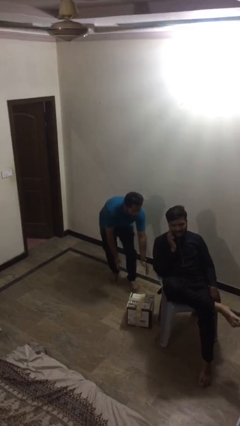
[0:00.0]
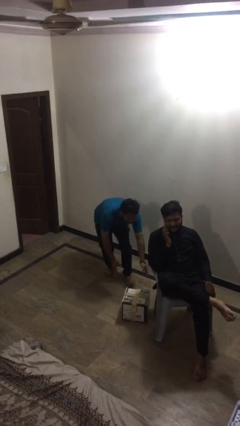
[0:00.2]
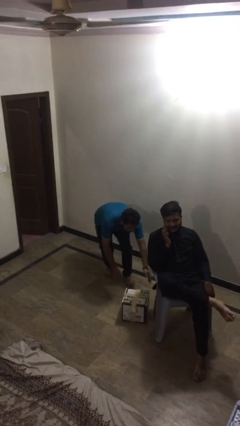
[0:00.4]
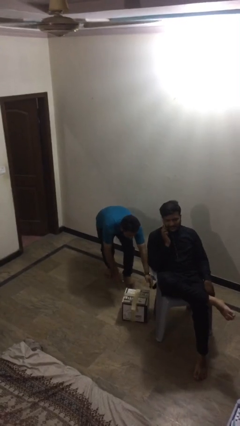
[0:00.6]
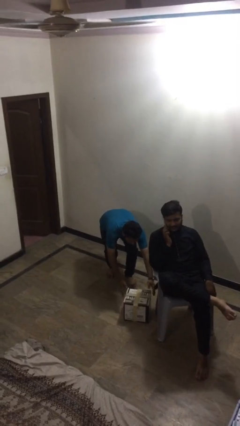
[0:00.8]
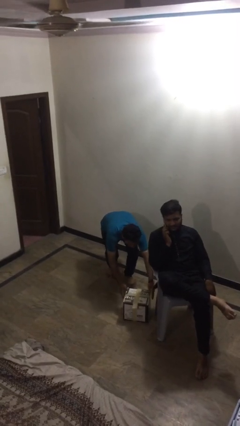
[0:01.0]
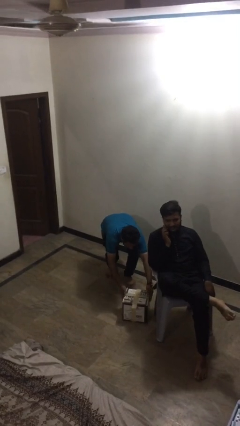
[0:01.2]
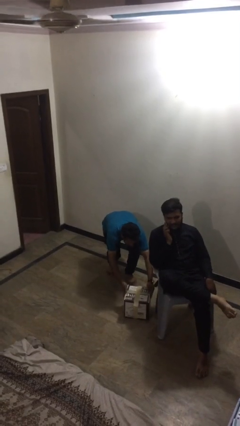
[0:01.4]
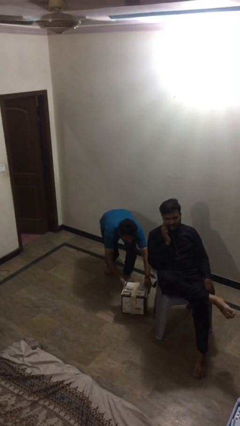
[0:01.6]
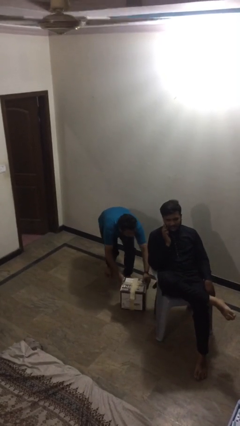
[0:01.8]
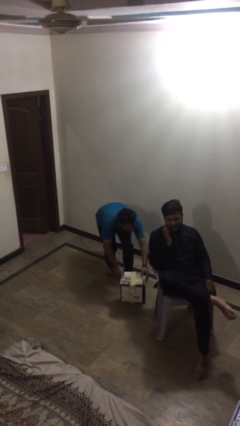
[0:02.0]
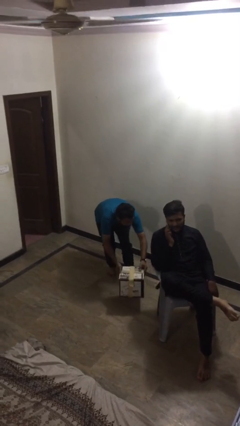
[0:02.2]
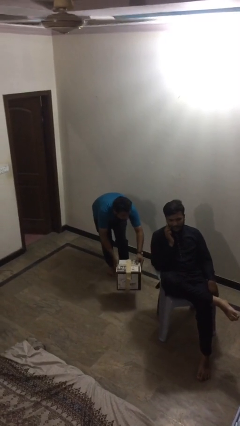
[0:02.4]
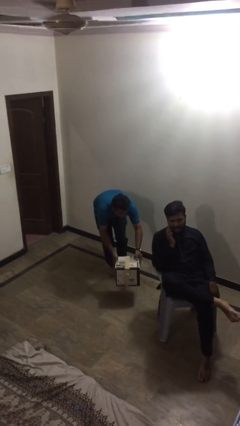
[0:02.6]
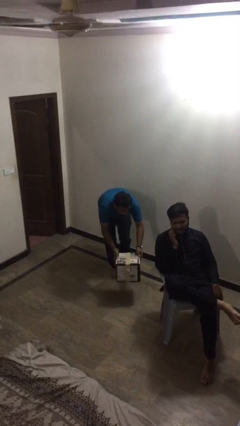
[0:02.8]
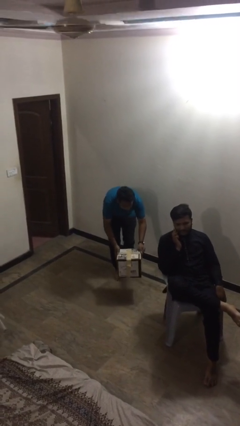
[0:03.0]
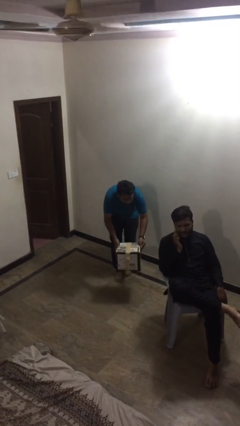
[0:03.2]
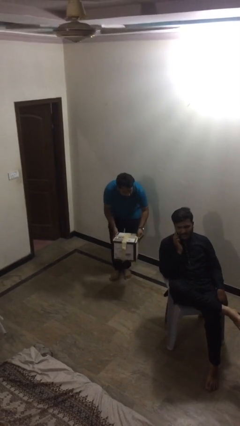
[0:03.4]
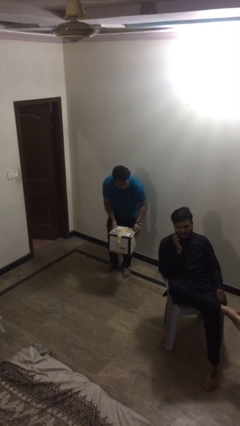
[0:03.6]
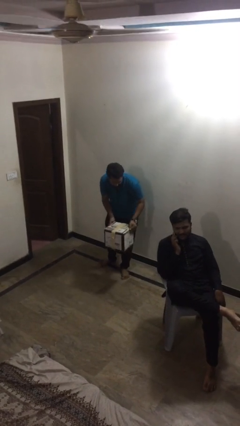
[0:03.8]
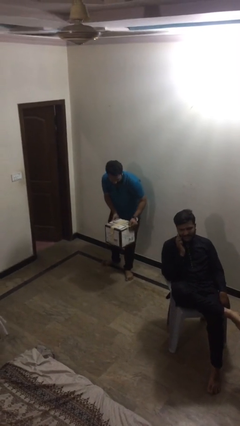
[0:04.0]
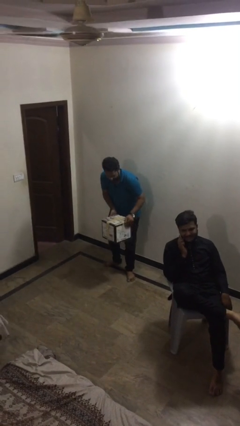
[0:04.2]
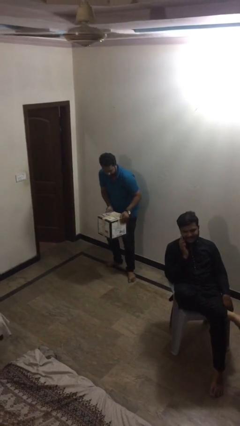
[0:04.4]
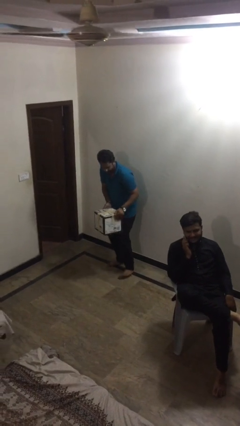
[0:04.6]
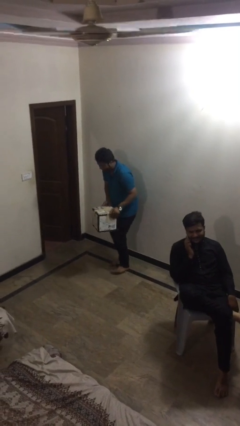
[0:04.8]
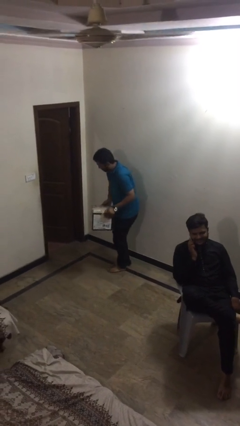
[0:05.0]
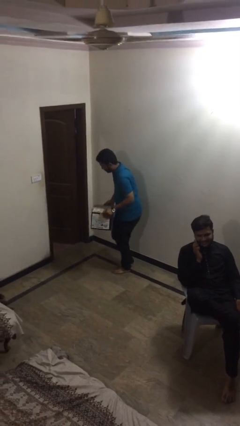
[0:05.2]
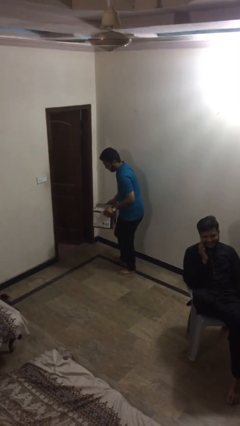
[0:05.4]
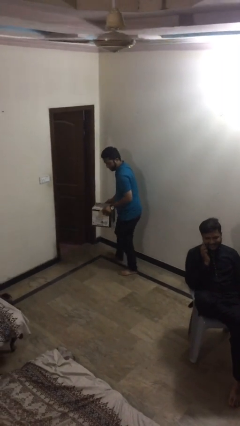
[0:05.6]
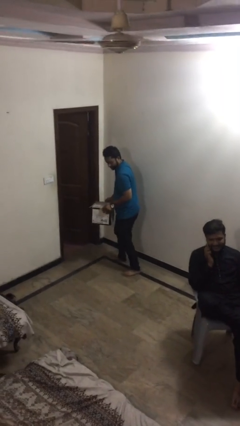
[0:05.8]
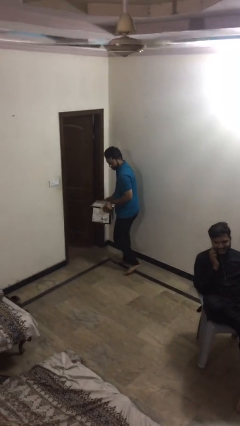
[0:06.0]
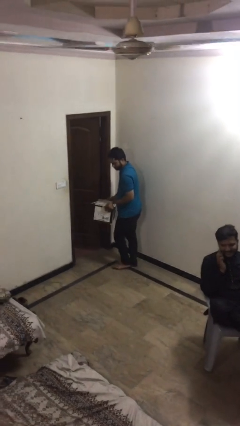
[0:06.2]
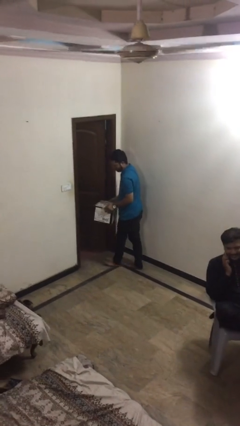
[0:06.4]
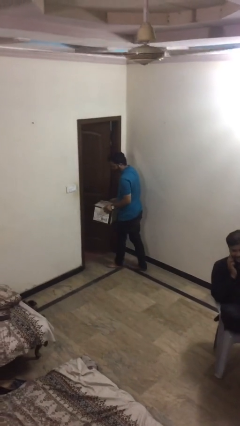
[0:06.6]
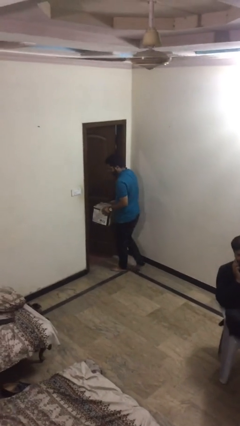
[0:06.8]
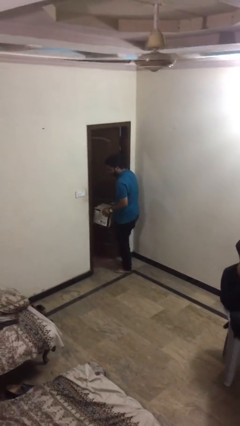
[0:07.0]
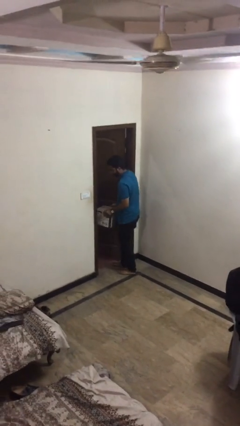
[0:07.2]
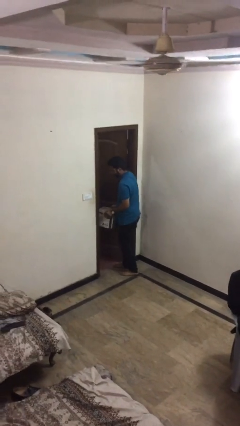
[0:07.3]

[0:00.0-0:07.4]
person steals object from person

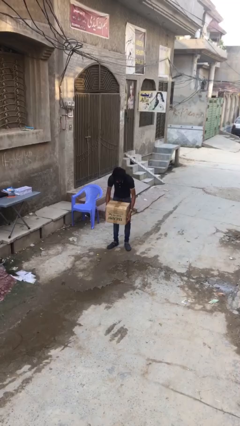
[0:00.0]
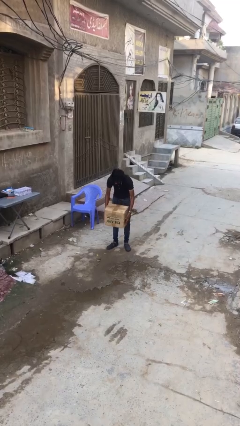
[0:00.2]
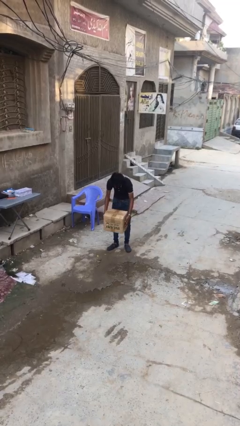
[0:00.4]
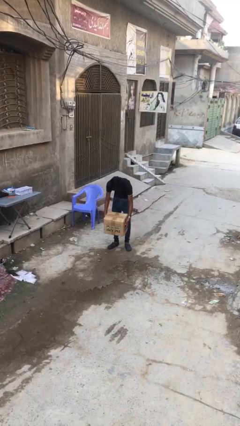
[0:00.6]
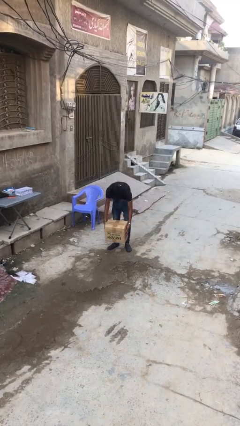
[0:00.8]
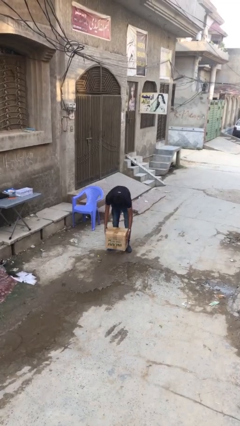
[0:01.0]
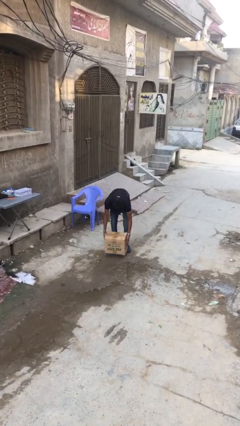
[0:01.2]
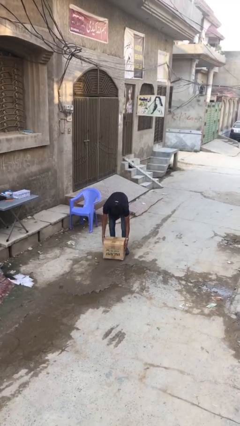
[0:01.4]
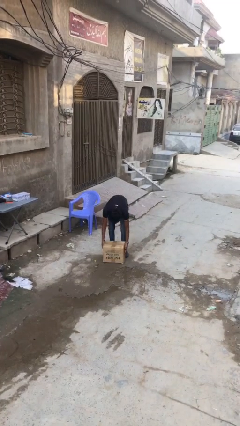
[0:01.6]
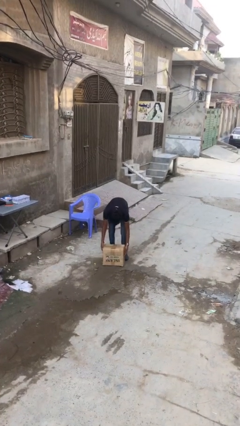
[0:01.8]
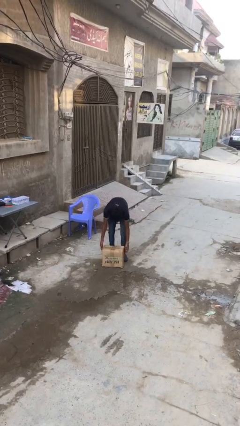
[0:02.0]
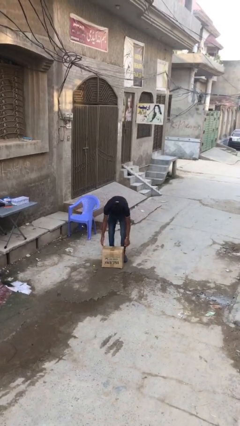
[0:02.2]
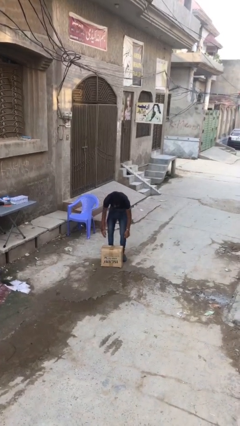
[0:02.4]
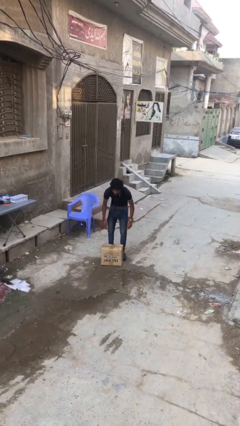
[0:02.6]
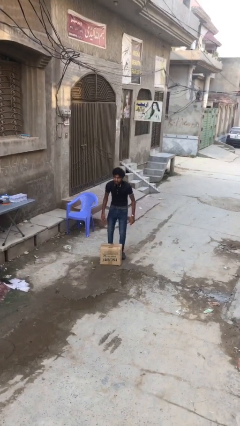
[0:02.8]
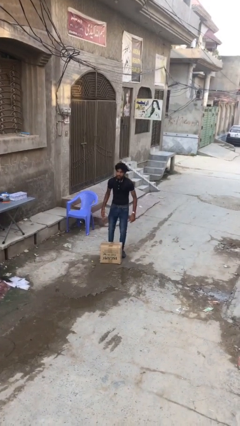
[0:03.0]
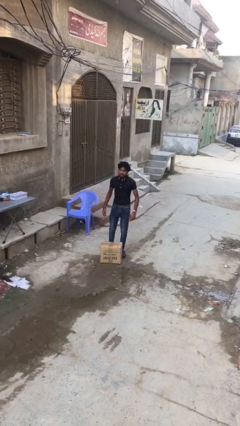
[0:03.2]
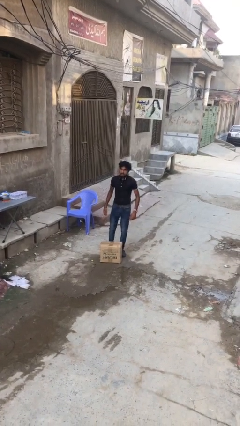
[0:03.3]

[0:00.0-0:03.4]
person puts down object on floor

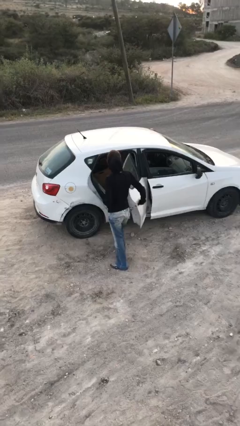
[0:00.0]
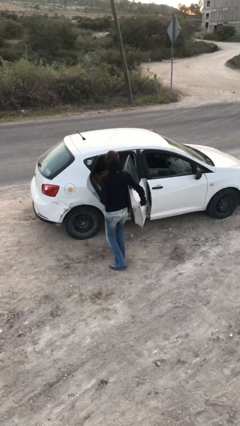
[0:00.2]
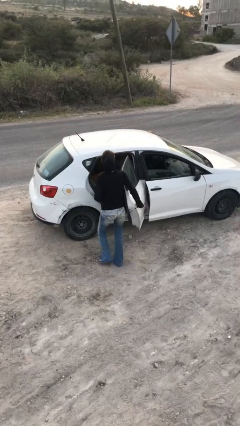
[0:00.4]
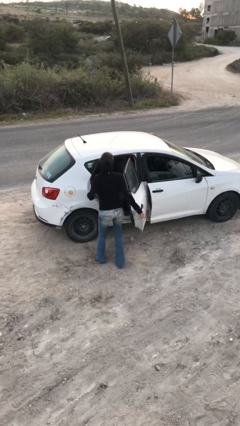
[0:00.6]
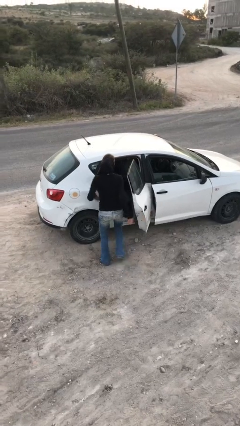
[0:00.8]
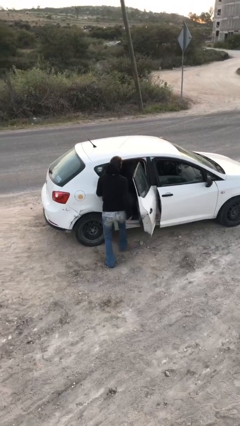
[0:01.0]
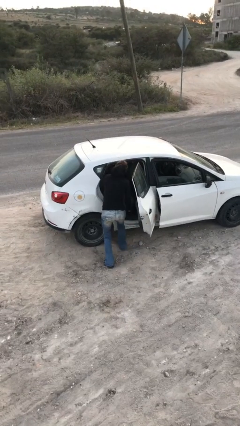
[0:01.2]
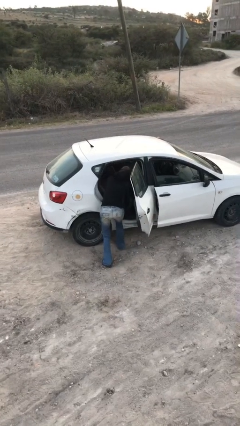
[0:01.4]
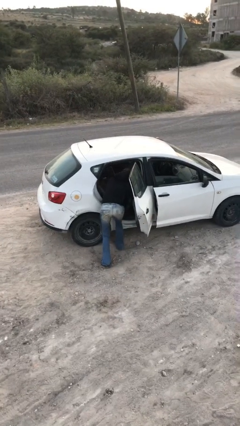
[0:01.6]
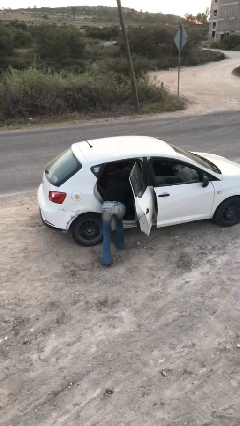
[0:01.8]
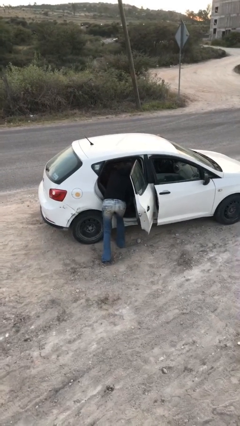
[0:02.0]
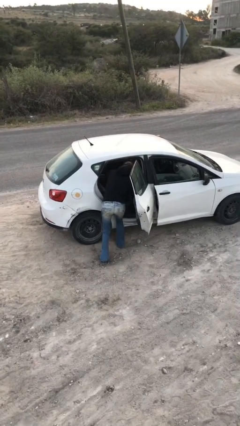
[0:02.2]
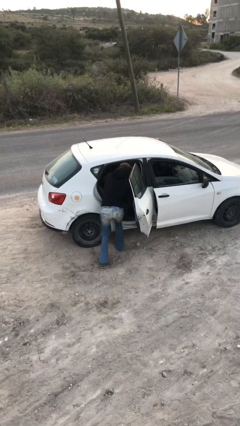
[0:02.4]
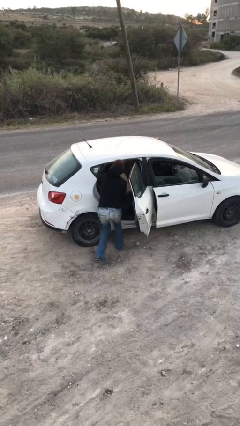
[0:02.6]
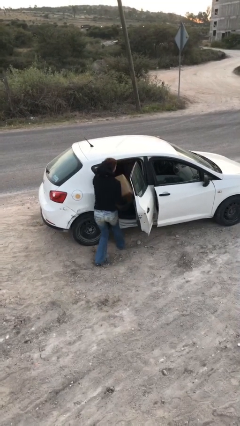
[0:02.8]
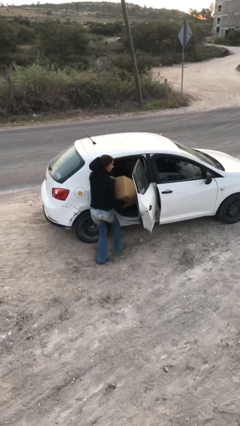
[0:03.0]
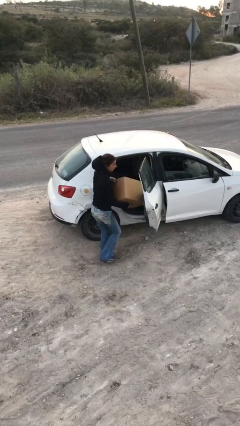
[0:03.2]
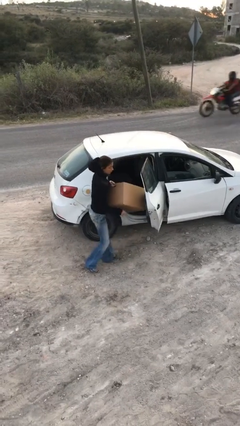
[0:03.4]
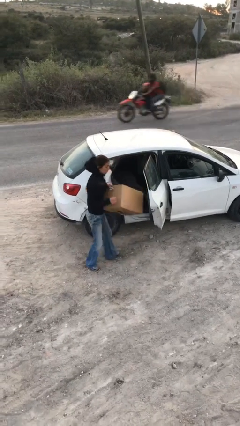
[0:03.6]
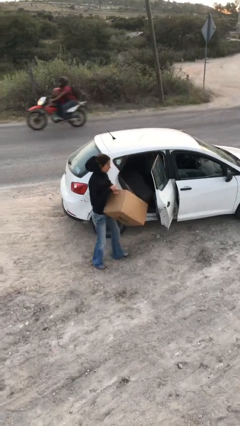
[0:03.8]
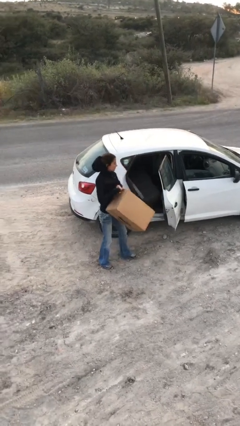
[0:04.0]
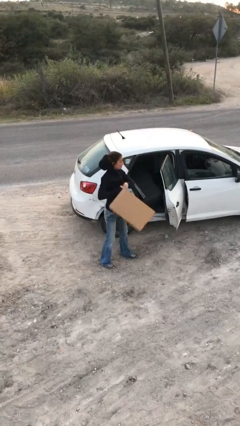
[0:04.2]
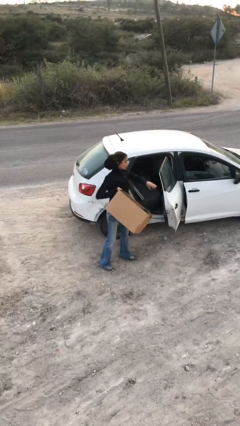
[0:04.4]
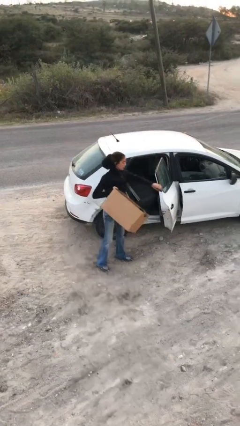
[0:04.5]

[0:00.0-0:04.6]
person unloads car

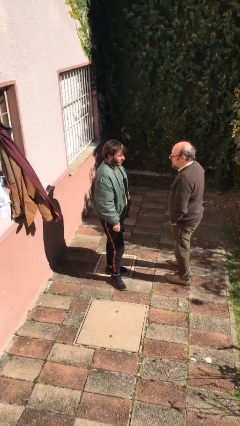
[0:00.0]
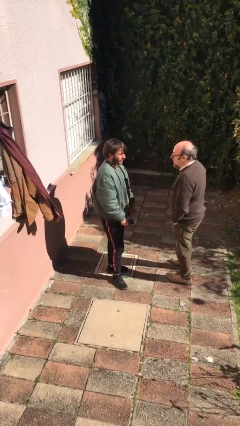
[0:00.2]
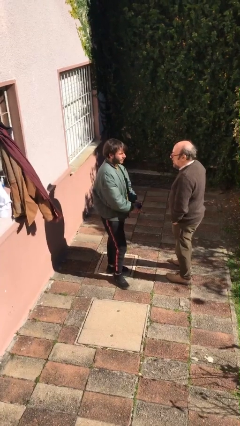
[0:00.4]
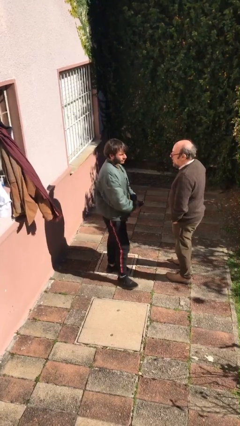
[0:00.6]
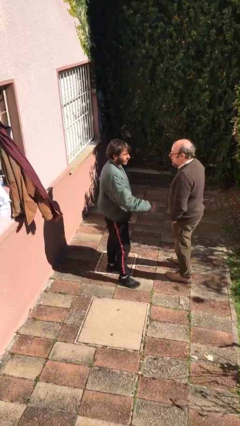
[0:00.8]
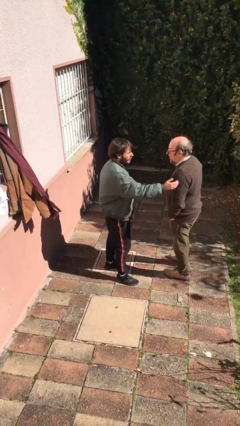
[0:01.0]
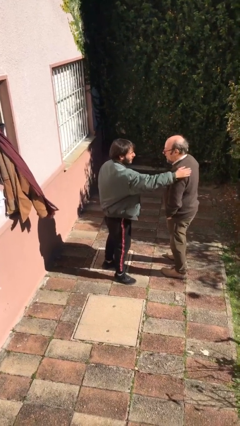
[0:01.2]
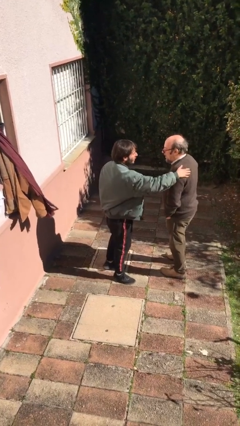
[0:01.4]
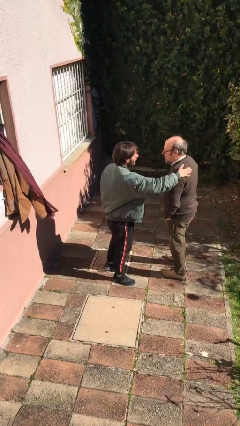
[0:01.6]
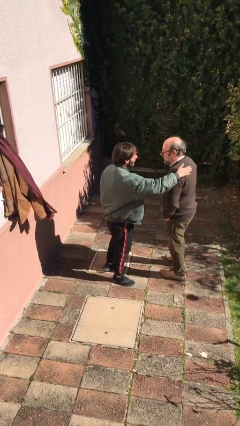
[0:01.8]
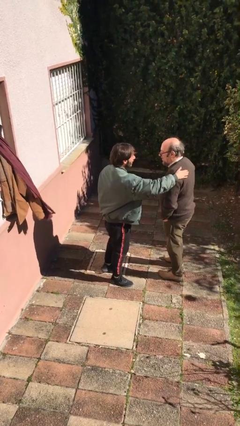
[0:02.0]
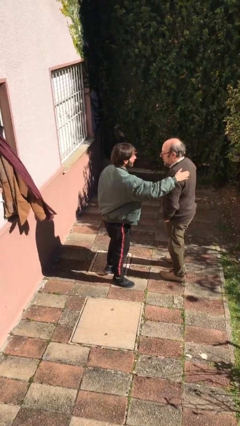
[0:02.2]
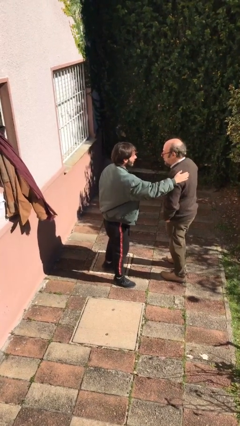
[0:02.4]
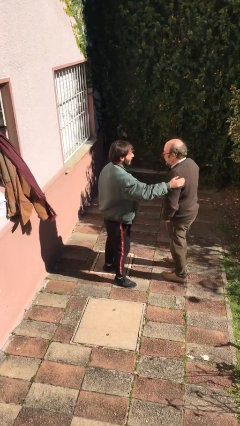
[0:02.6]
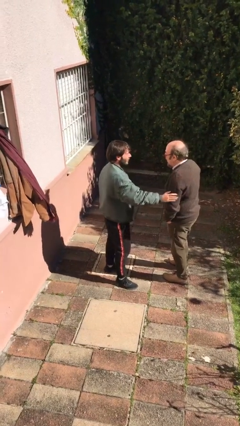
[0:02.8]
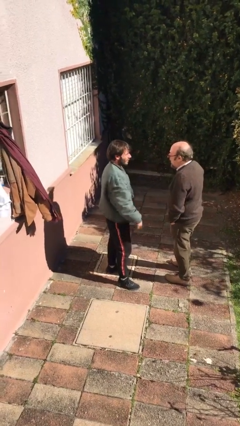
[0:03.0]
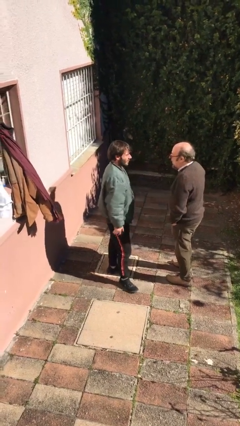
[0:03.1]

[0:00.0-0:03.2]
person pounds shoulders of person
